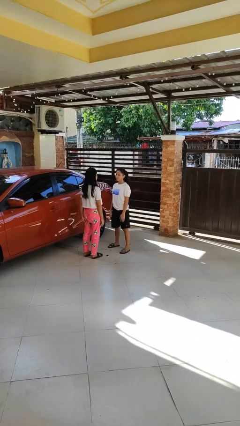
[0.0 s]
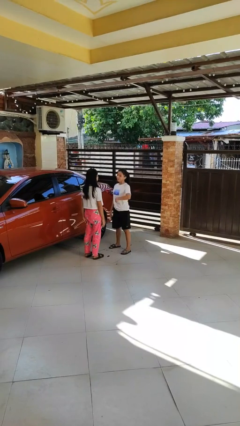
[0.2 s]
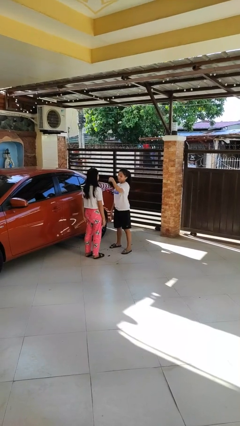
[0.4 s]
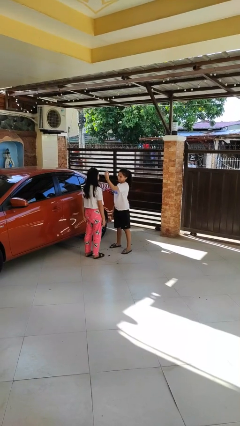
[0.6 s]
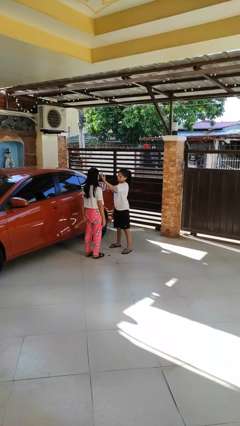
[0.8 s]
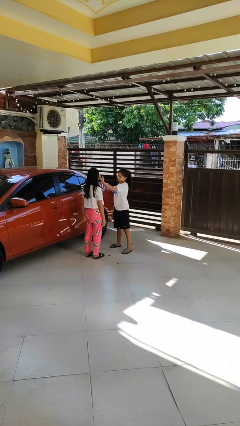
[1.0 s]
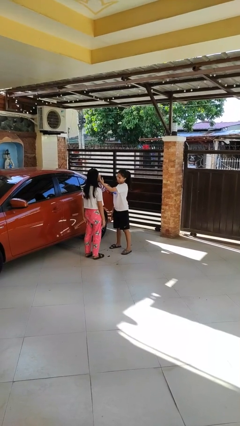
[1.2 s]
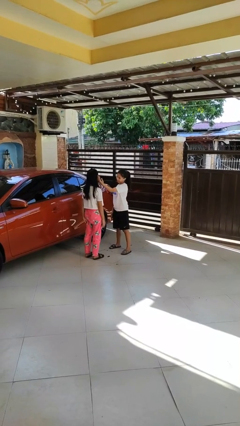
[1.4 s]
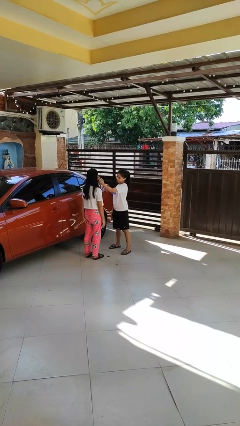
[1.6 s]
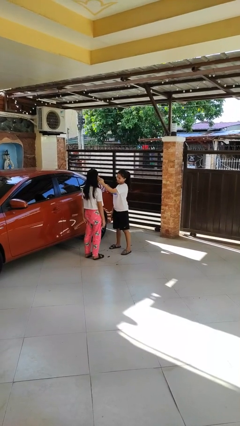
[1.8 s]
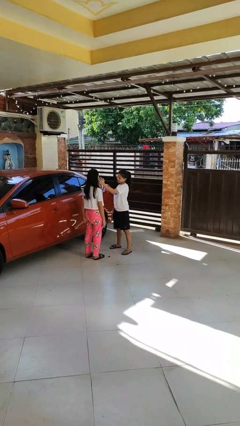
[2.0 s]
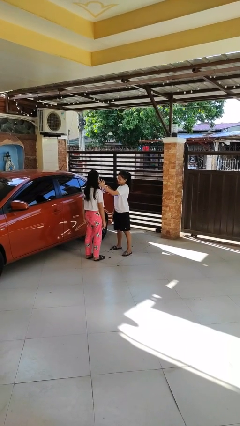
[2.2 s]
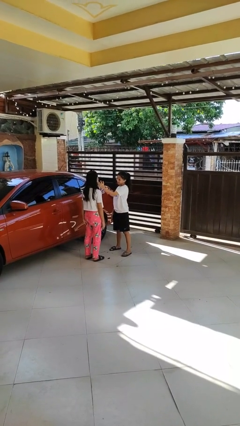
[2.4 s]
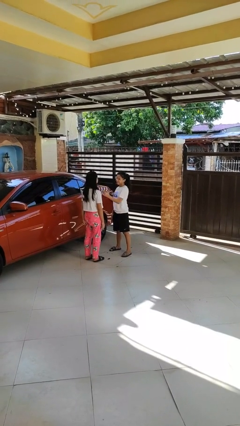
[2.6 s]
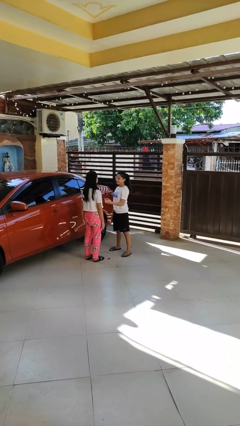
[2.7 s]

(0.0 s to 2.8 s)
person touches face of person

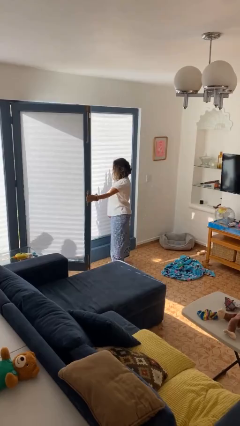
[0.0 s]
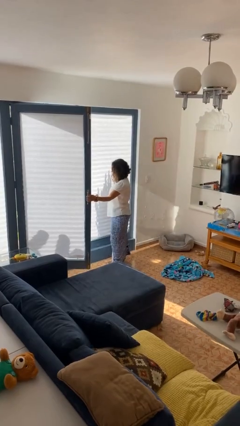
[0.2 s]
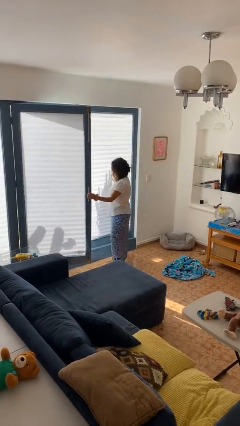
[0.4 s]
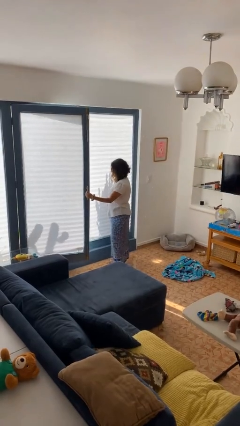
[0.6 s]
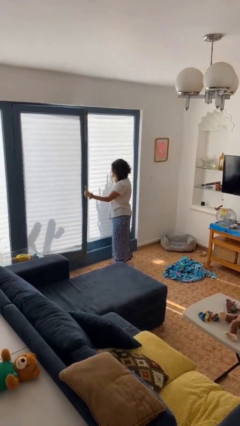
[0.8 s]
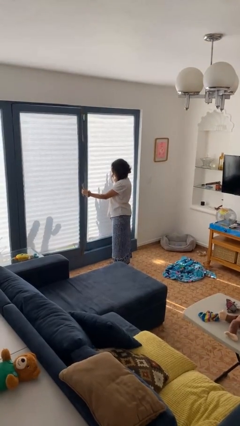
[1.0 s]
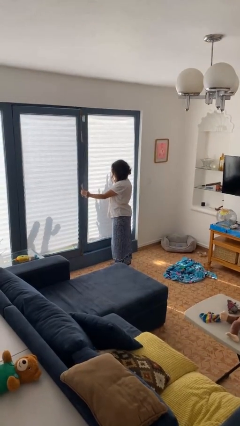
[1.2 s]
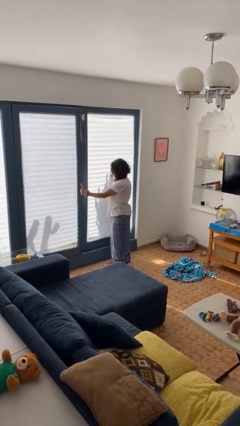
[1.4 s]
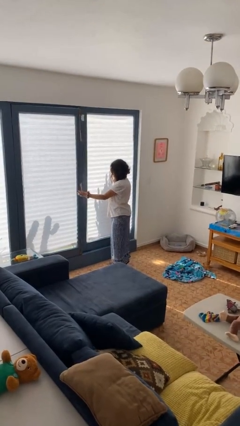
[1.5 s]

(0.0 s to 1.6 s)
person closes home window

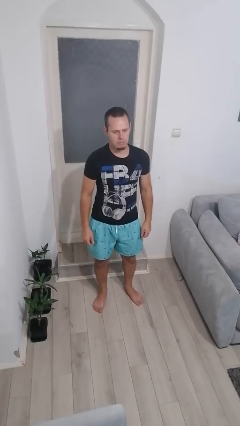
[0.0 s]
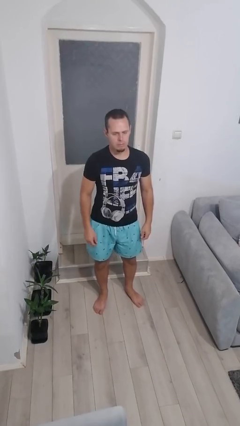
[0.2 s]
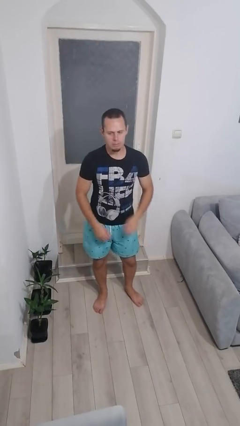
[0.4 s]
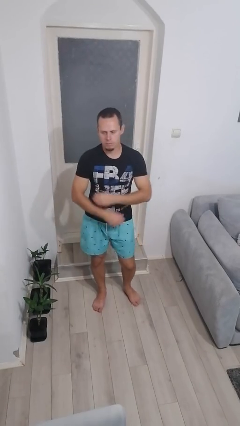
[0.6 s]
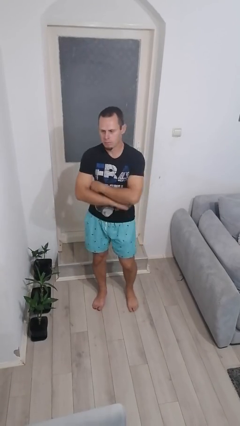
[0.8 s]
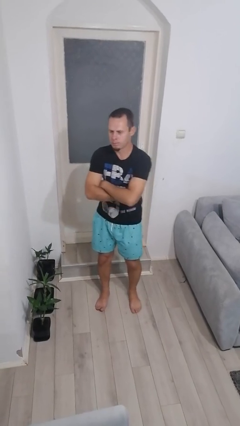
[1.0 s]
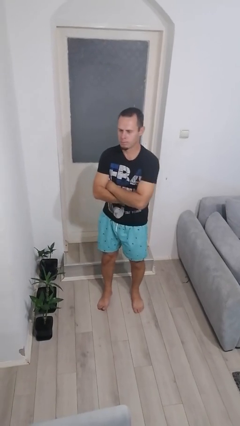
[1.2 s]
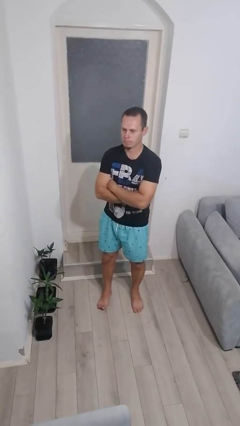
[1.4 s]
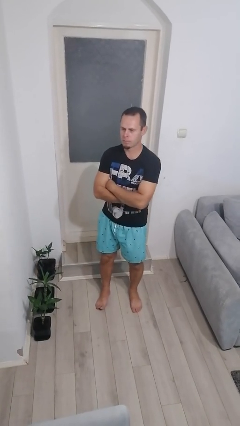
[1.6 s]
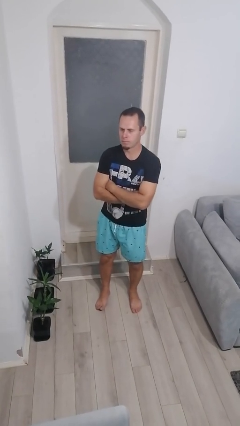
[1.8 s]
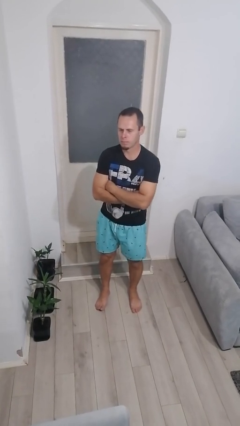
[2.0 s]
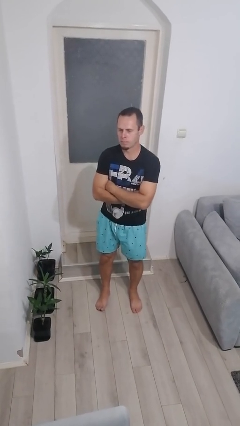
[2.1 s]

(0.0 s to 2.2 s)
person crosses arms

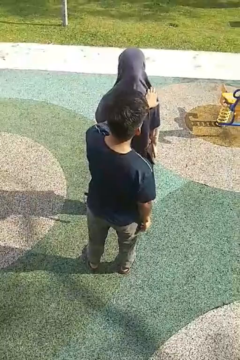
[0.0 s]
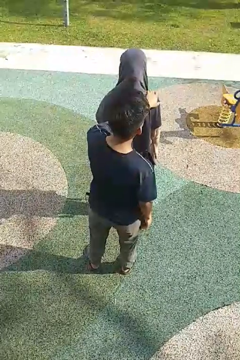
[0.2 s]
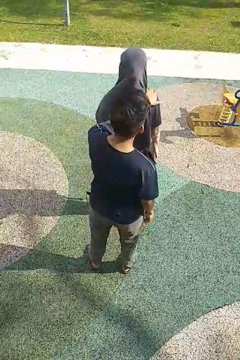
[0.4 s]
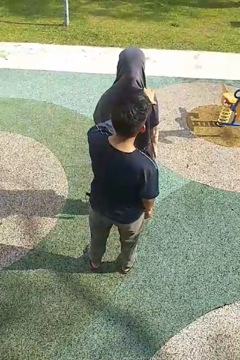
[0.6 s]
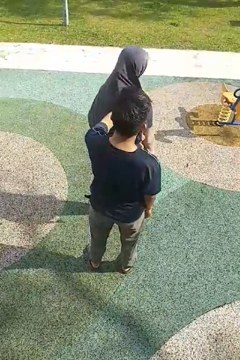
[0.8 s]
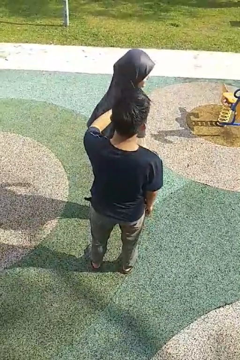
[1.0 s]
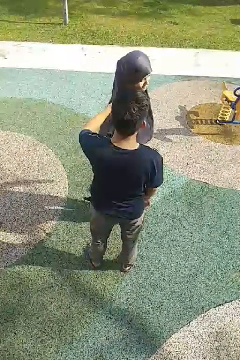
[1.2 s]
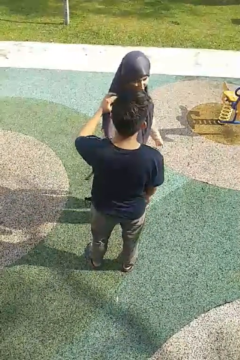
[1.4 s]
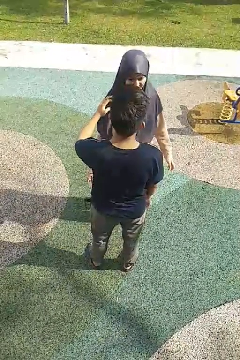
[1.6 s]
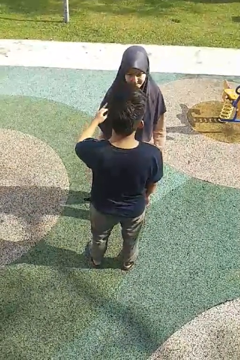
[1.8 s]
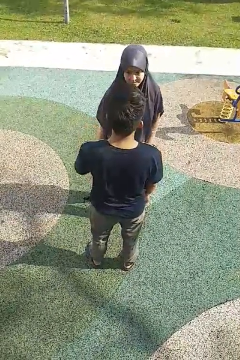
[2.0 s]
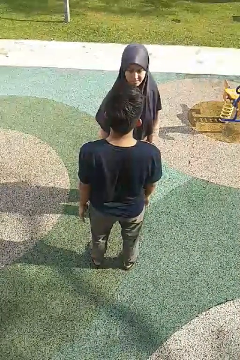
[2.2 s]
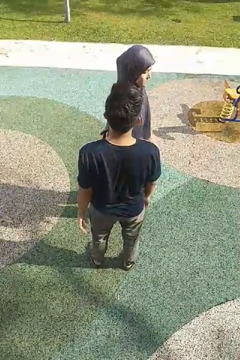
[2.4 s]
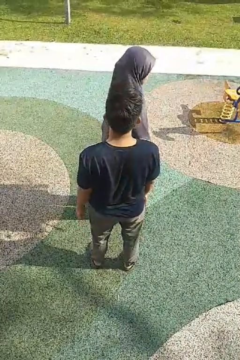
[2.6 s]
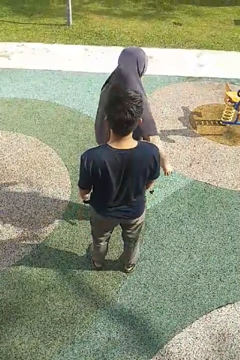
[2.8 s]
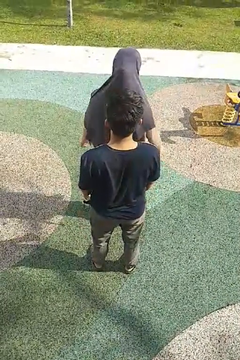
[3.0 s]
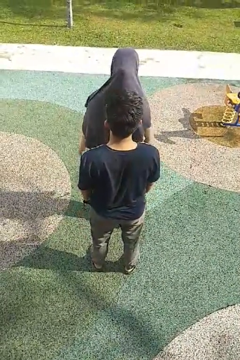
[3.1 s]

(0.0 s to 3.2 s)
person spins person around

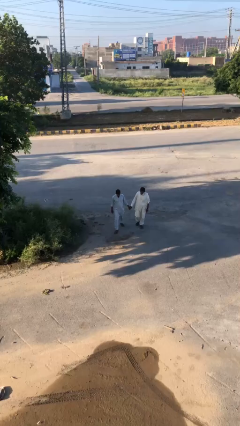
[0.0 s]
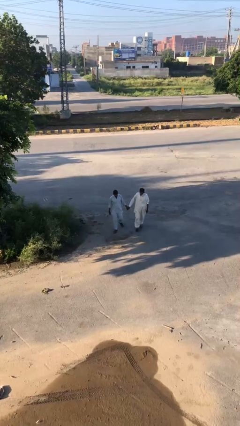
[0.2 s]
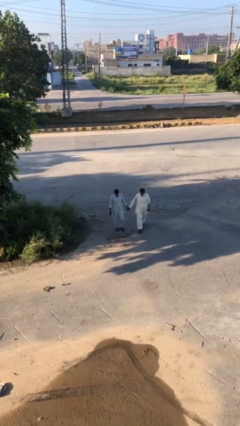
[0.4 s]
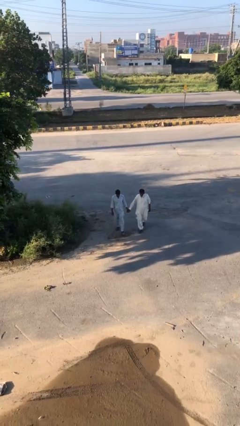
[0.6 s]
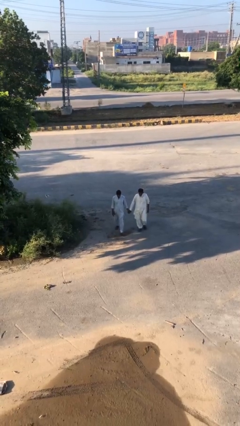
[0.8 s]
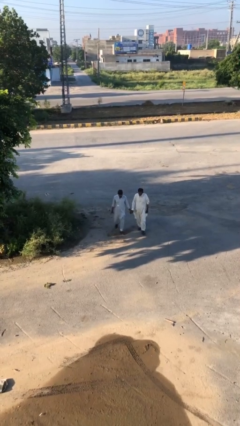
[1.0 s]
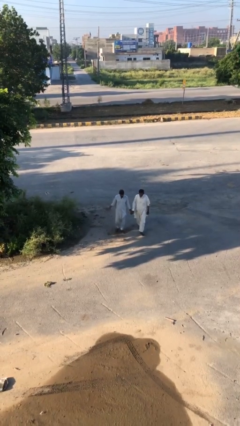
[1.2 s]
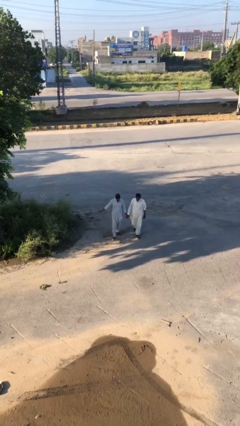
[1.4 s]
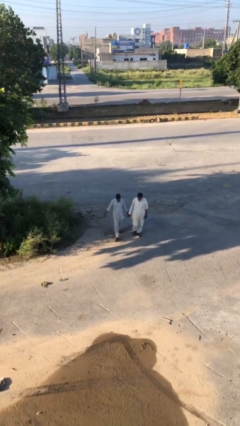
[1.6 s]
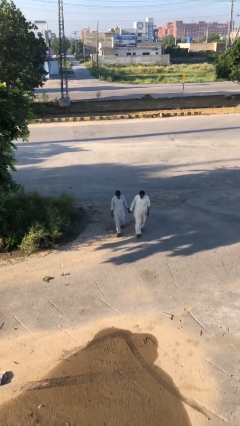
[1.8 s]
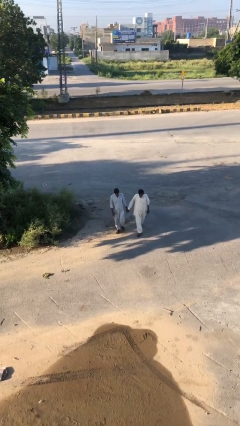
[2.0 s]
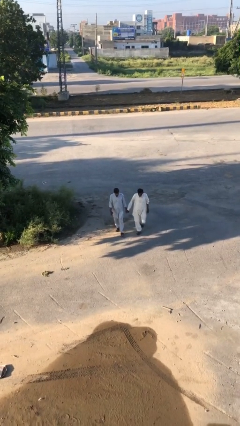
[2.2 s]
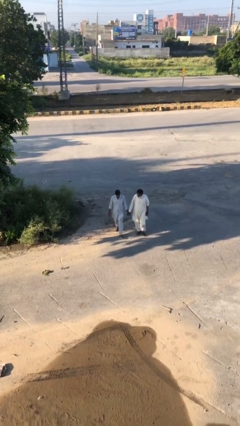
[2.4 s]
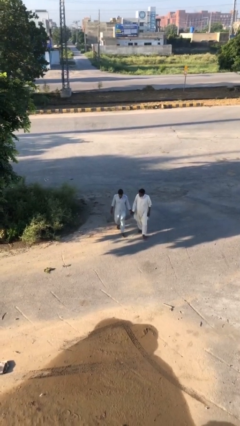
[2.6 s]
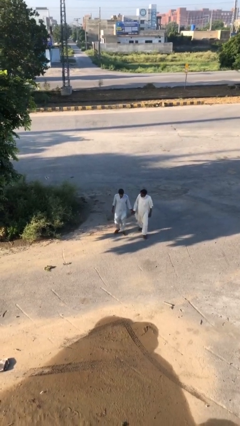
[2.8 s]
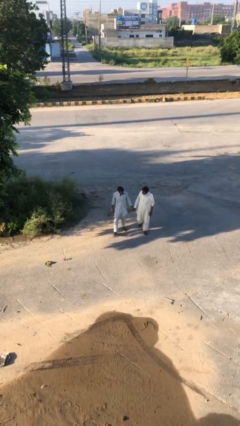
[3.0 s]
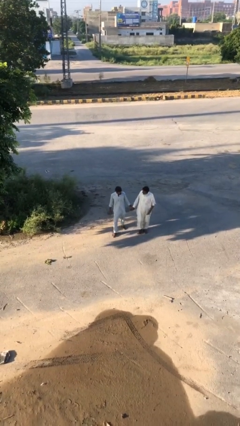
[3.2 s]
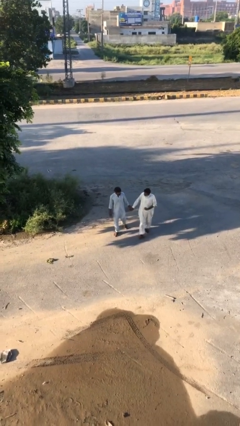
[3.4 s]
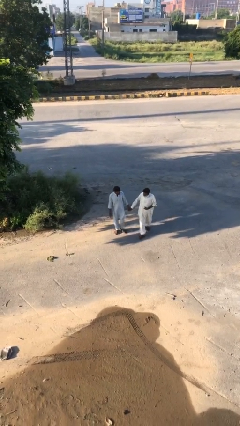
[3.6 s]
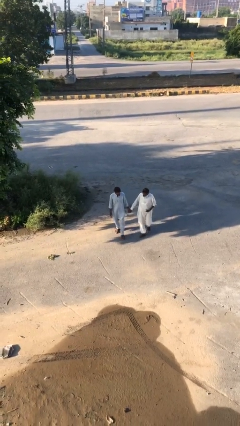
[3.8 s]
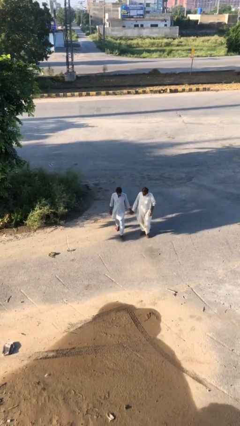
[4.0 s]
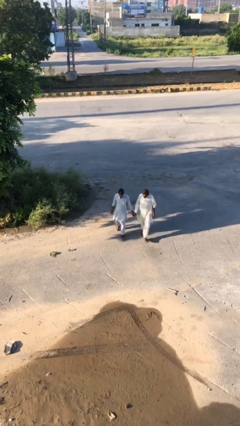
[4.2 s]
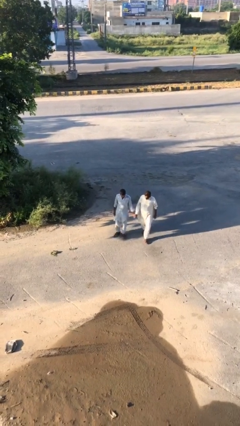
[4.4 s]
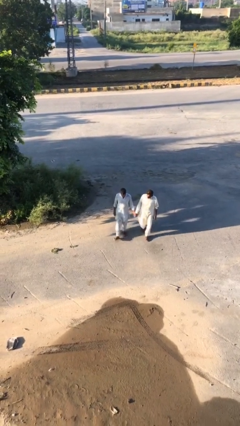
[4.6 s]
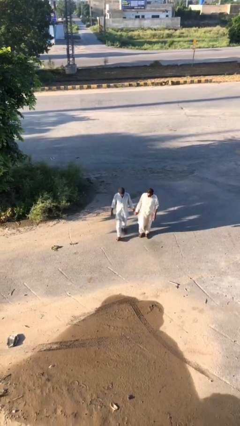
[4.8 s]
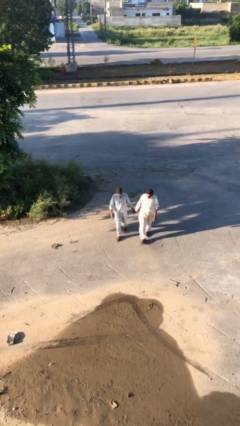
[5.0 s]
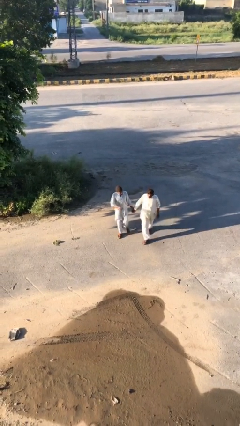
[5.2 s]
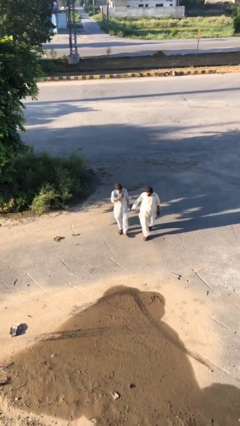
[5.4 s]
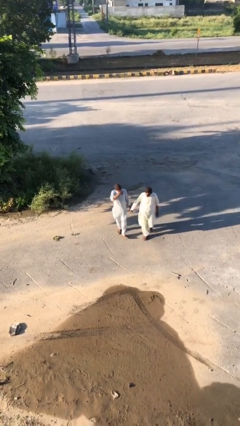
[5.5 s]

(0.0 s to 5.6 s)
person holds hand

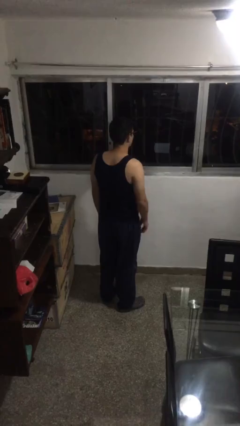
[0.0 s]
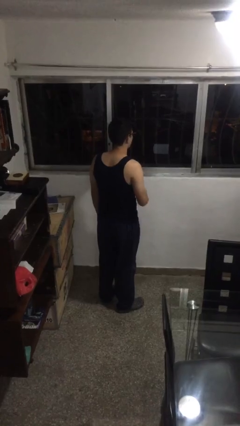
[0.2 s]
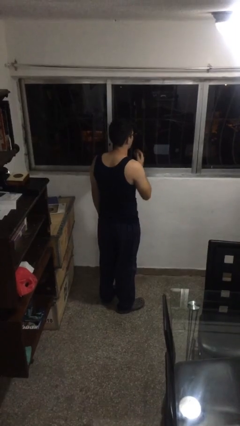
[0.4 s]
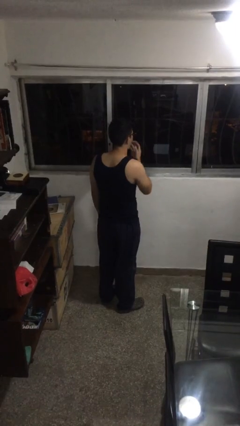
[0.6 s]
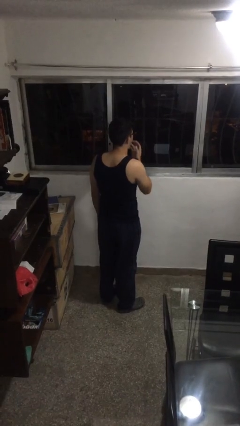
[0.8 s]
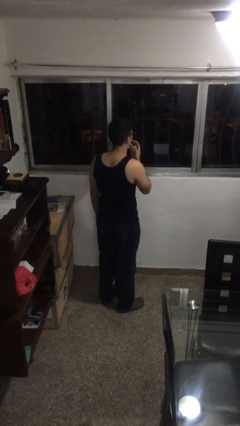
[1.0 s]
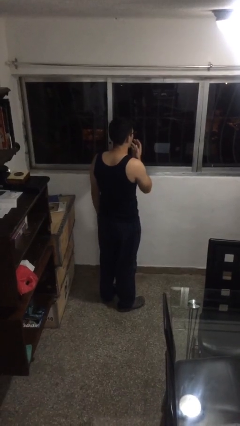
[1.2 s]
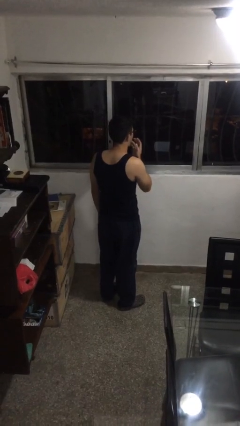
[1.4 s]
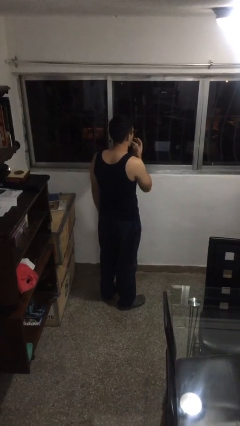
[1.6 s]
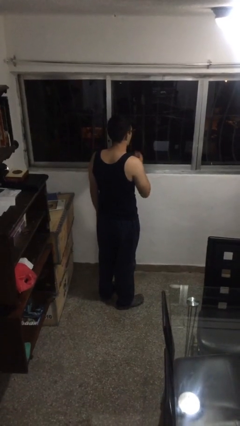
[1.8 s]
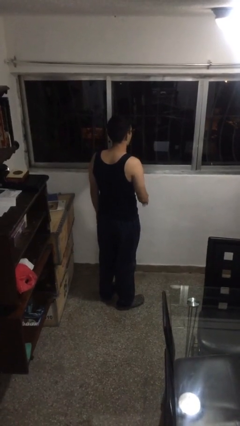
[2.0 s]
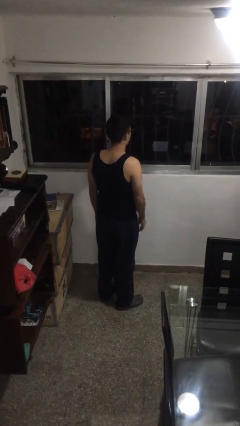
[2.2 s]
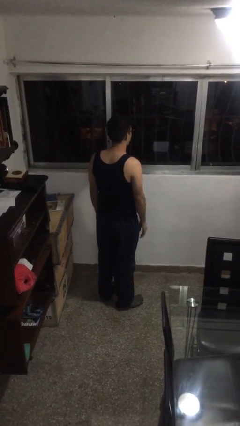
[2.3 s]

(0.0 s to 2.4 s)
person licks fingers

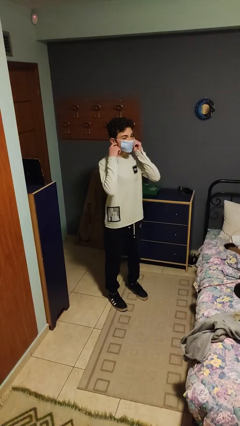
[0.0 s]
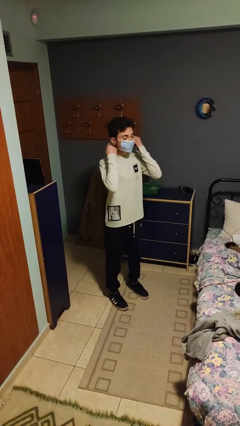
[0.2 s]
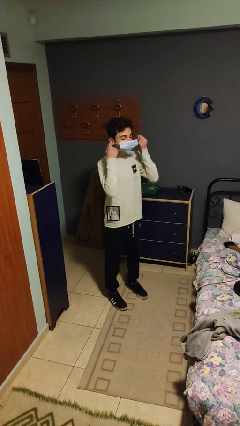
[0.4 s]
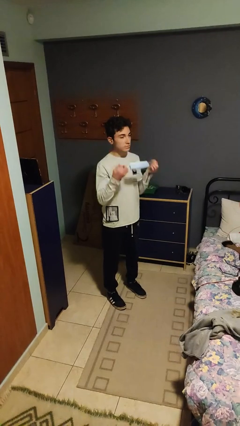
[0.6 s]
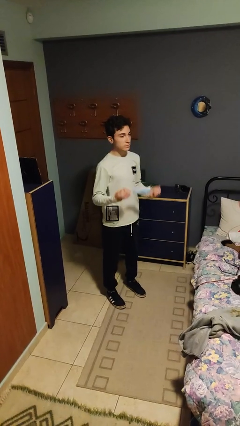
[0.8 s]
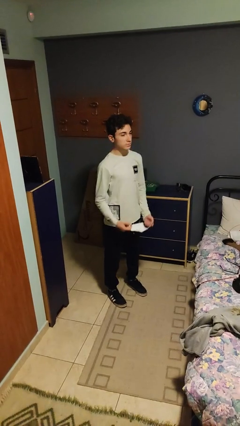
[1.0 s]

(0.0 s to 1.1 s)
person takes off facemask
